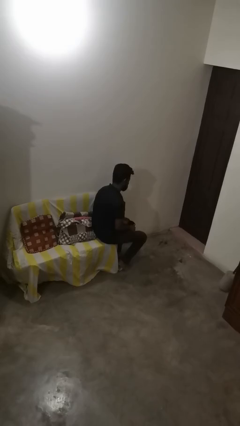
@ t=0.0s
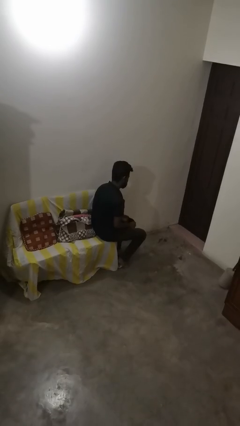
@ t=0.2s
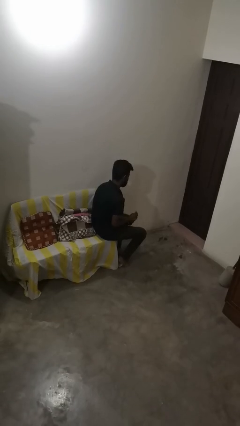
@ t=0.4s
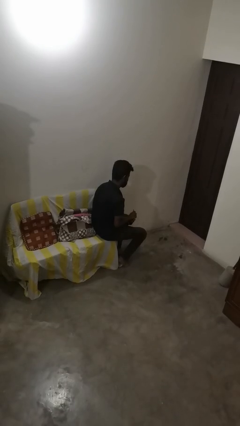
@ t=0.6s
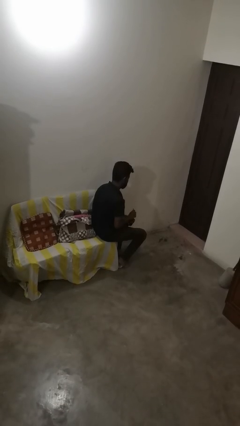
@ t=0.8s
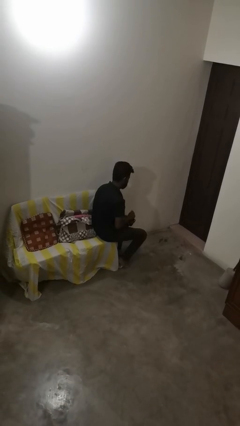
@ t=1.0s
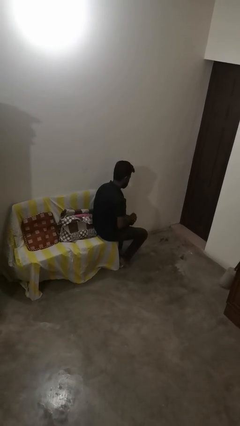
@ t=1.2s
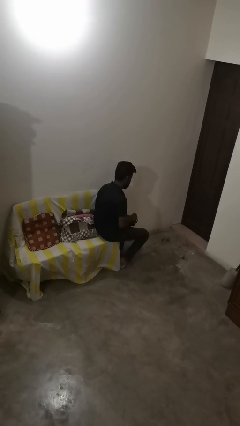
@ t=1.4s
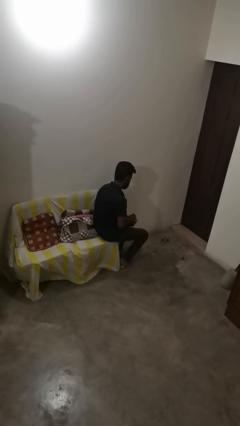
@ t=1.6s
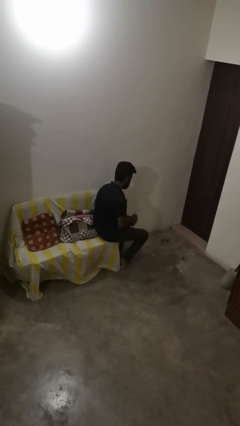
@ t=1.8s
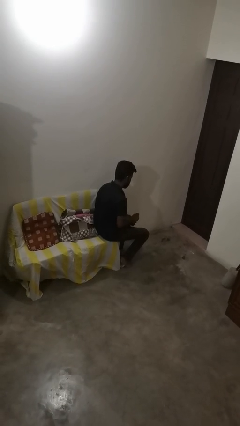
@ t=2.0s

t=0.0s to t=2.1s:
person stirs mug

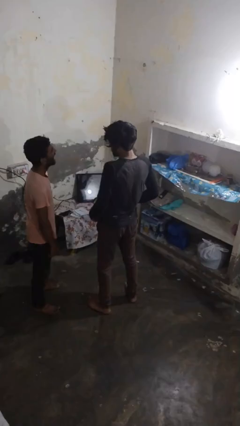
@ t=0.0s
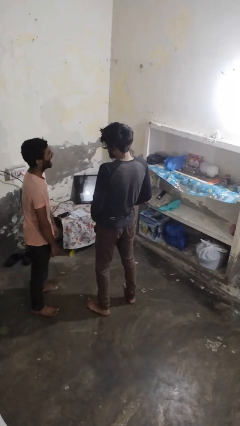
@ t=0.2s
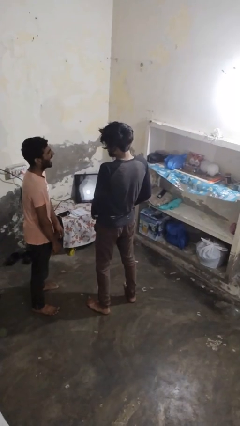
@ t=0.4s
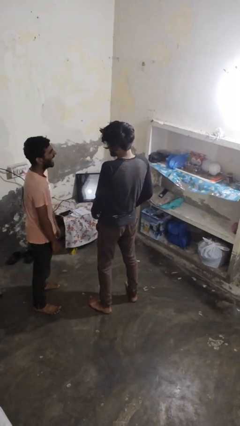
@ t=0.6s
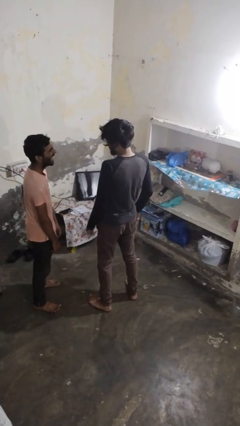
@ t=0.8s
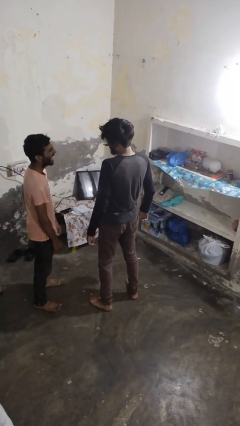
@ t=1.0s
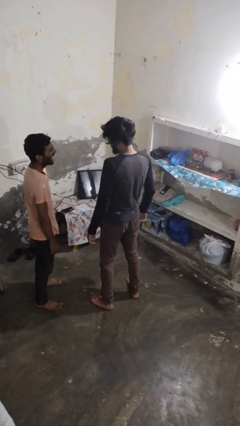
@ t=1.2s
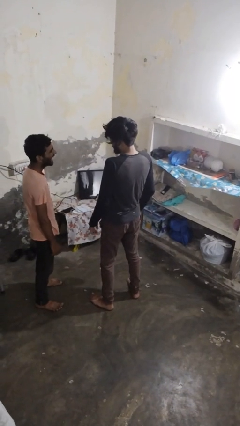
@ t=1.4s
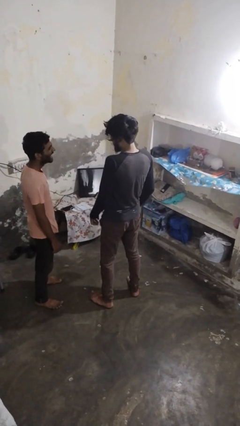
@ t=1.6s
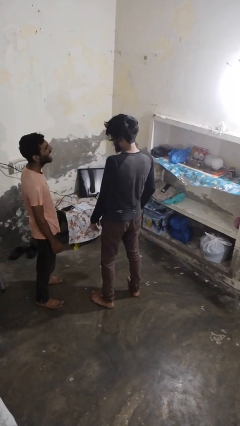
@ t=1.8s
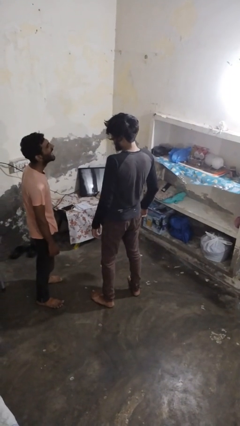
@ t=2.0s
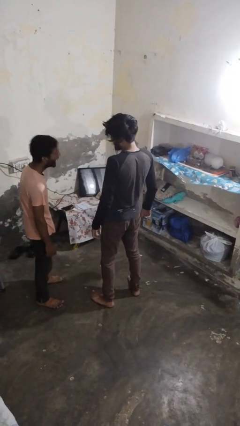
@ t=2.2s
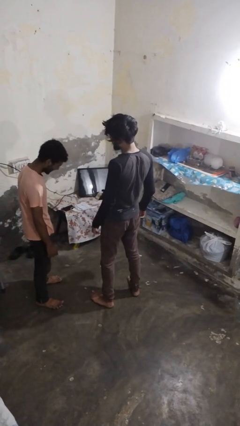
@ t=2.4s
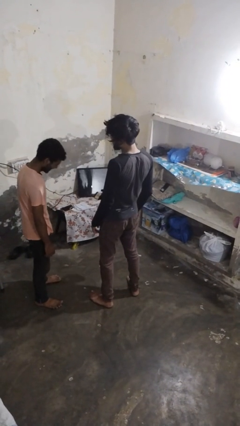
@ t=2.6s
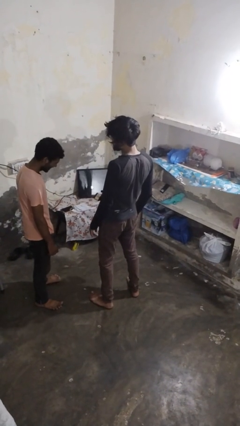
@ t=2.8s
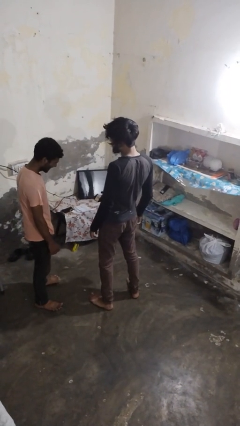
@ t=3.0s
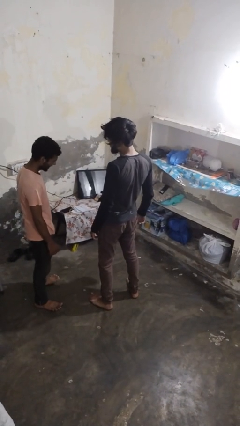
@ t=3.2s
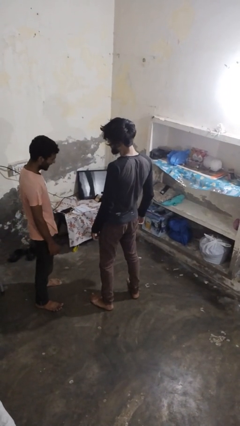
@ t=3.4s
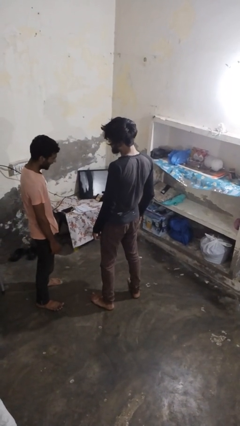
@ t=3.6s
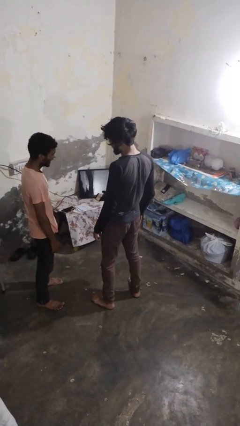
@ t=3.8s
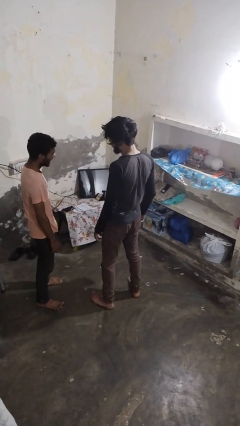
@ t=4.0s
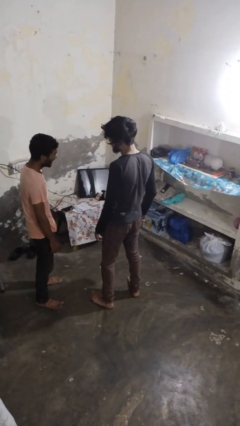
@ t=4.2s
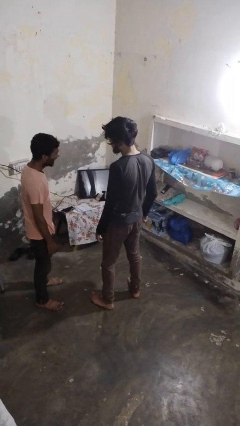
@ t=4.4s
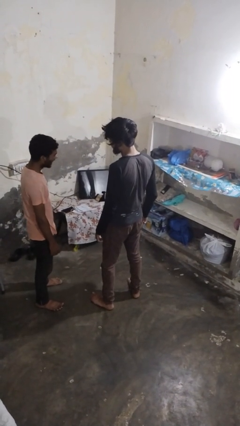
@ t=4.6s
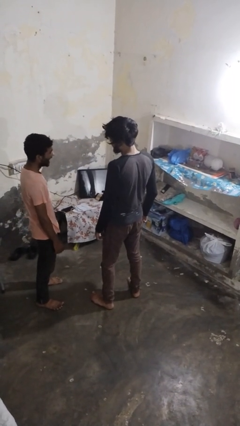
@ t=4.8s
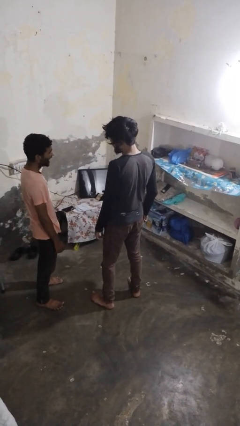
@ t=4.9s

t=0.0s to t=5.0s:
person laughs with person

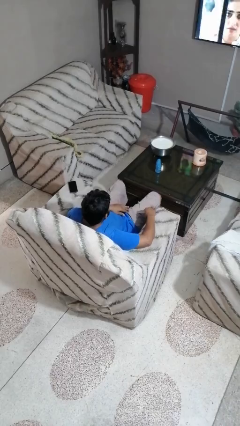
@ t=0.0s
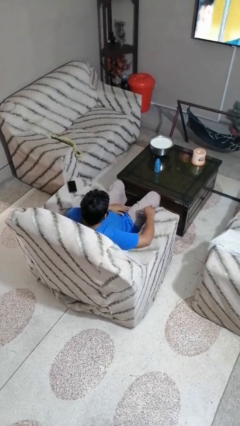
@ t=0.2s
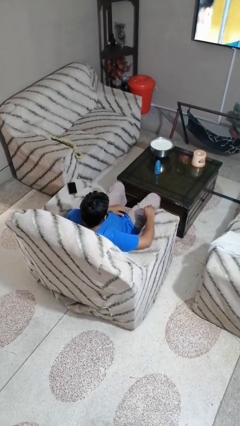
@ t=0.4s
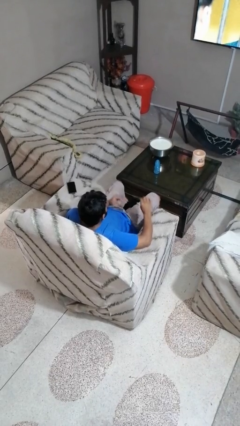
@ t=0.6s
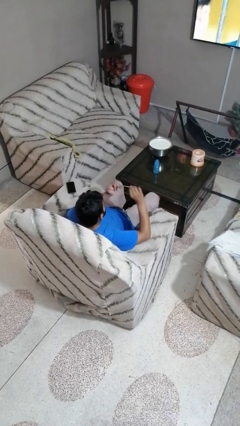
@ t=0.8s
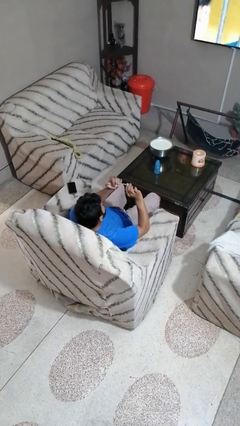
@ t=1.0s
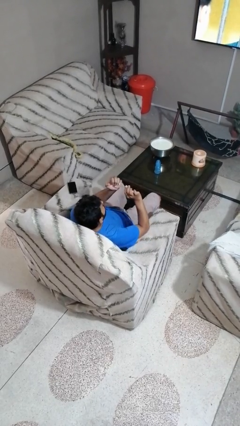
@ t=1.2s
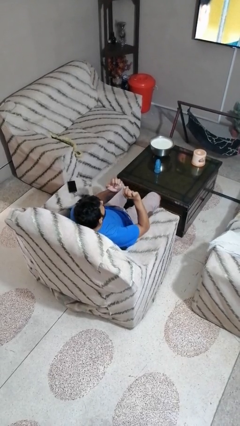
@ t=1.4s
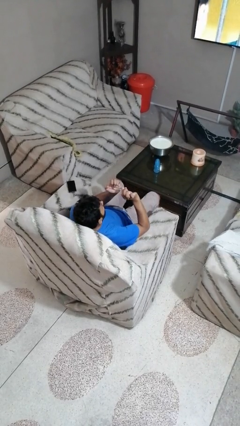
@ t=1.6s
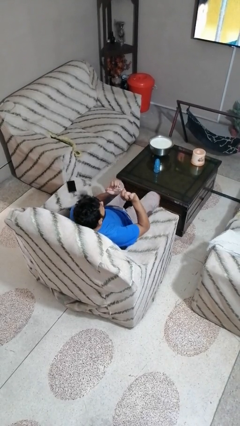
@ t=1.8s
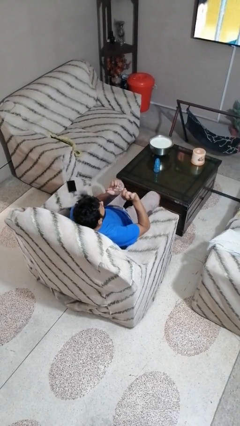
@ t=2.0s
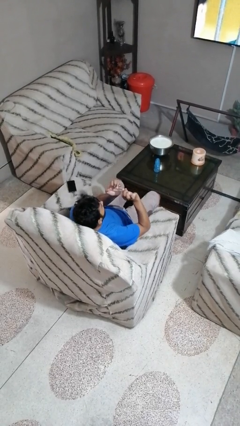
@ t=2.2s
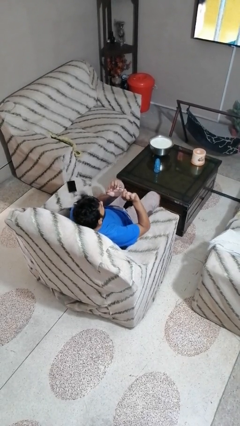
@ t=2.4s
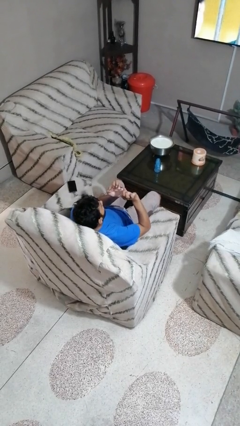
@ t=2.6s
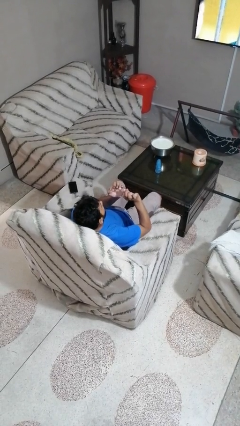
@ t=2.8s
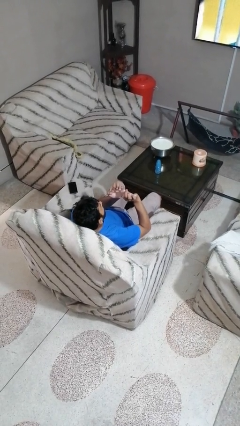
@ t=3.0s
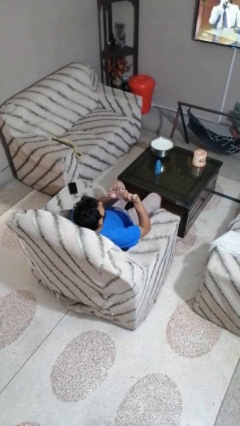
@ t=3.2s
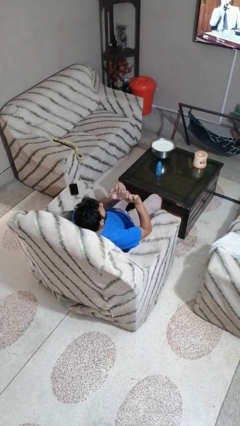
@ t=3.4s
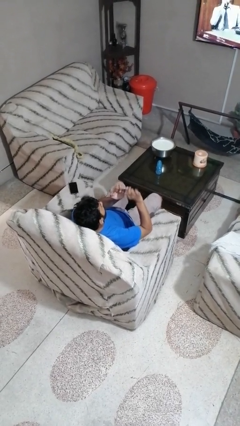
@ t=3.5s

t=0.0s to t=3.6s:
person files fingernails

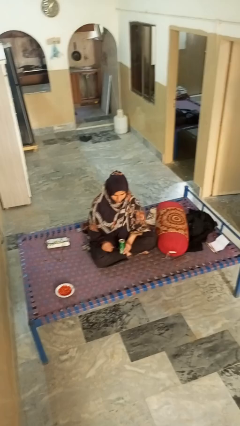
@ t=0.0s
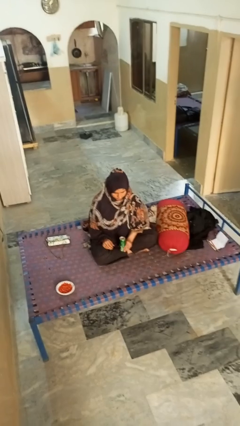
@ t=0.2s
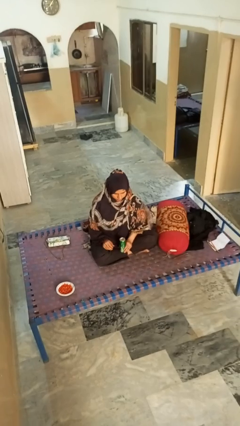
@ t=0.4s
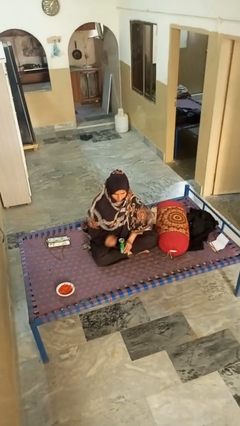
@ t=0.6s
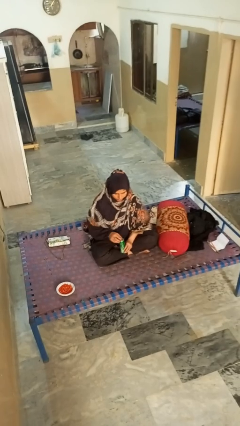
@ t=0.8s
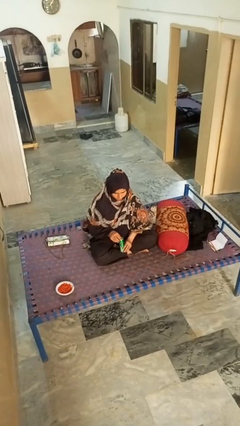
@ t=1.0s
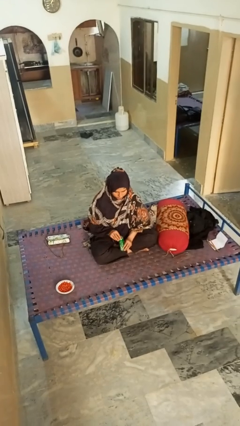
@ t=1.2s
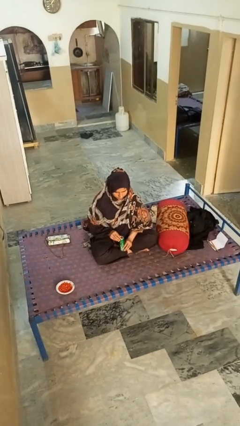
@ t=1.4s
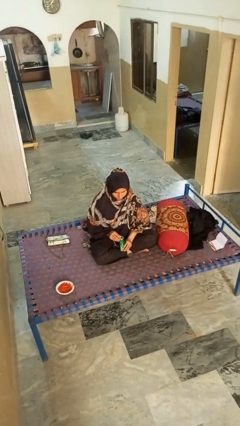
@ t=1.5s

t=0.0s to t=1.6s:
person opens can with can opener

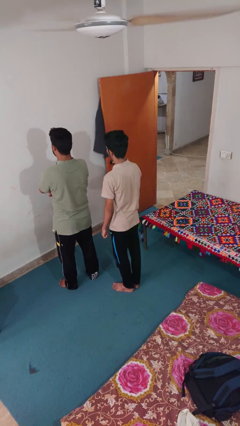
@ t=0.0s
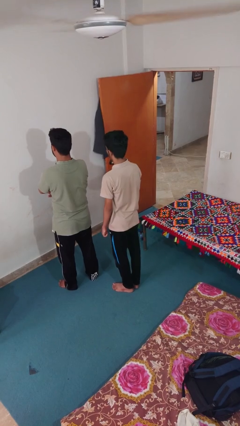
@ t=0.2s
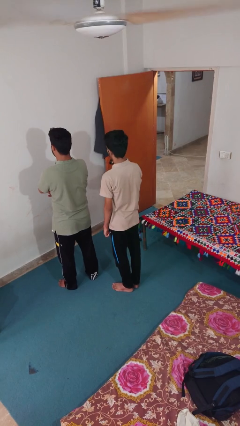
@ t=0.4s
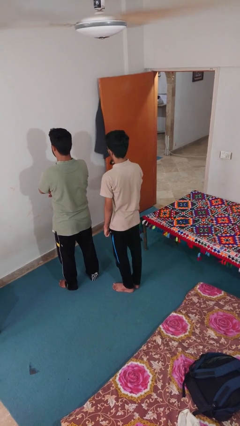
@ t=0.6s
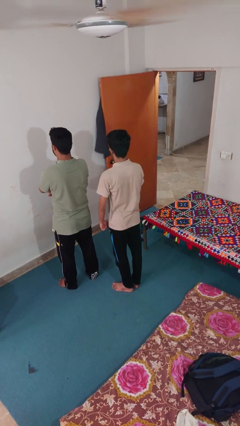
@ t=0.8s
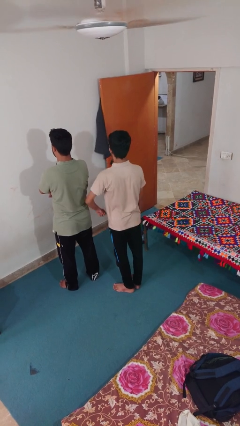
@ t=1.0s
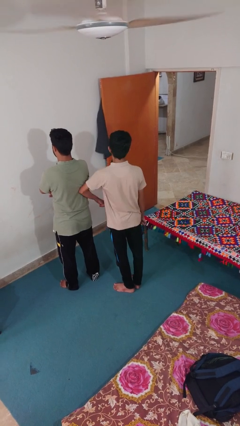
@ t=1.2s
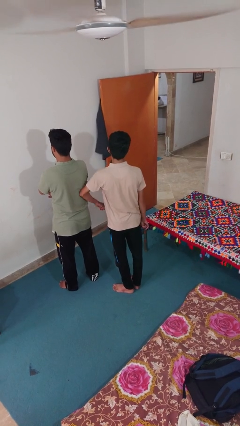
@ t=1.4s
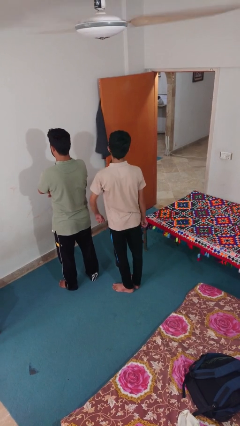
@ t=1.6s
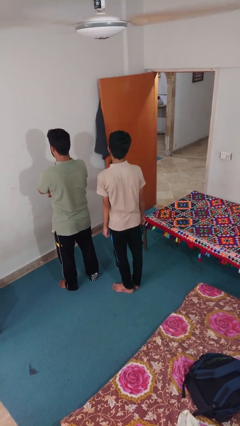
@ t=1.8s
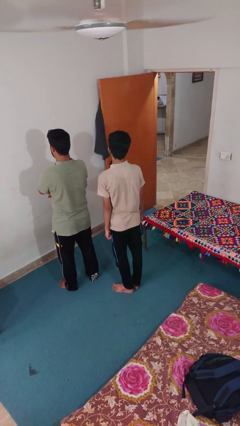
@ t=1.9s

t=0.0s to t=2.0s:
person nudges person with elbow

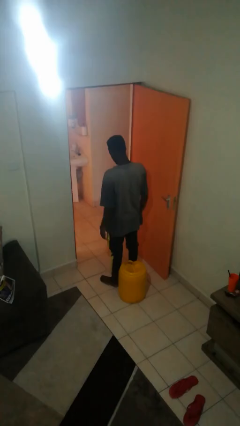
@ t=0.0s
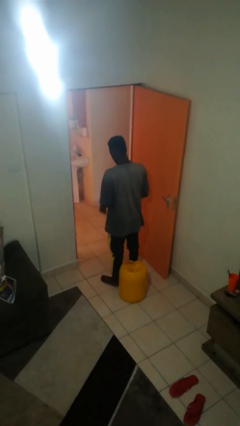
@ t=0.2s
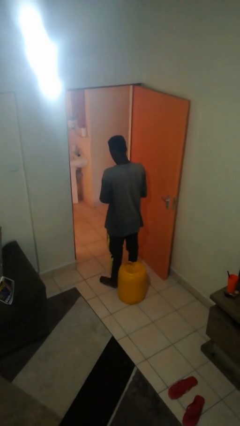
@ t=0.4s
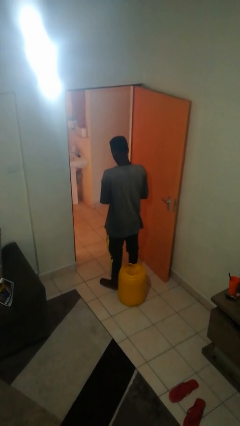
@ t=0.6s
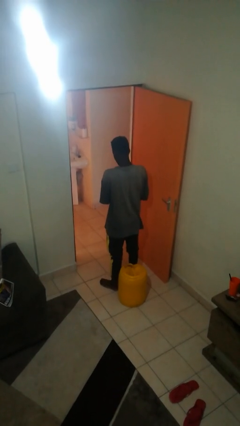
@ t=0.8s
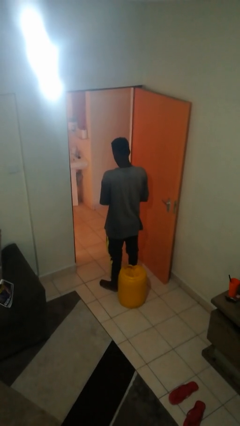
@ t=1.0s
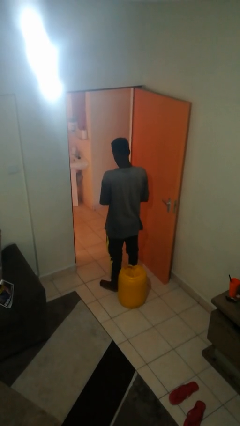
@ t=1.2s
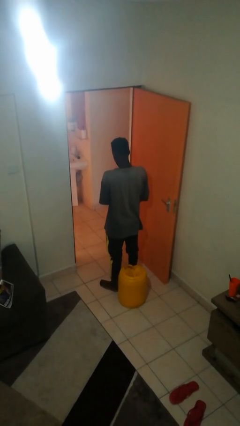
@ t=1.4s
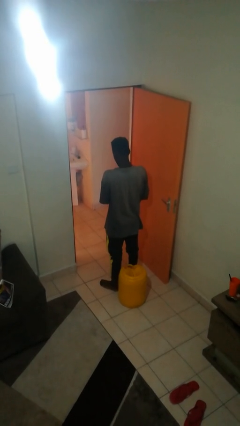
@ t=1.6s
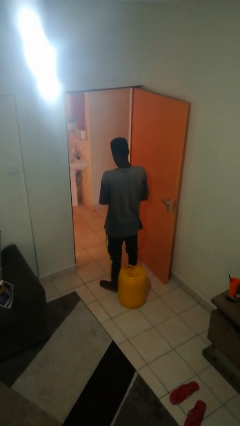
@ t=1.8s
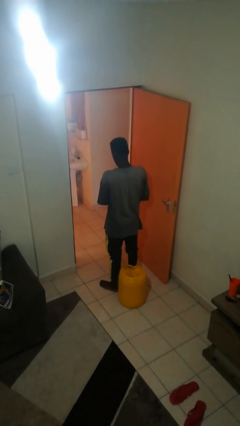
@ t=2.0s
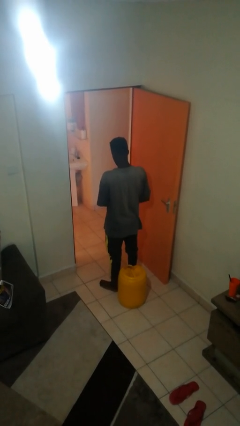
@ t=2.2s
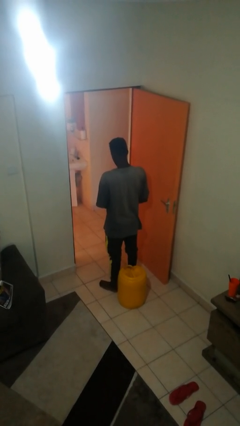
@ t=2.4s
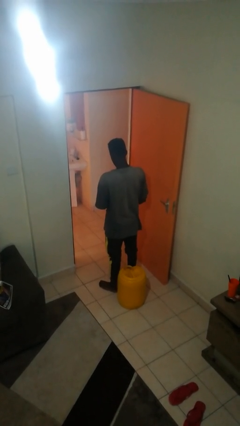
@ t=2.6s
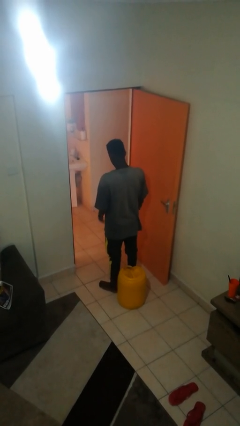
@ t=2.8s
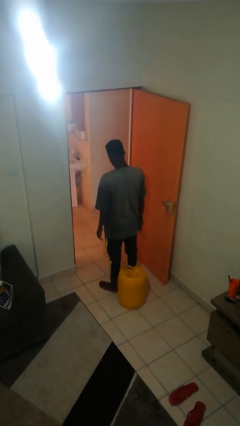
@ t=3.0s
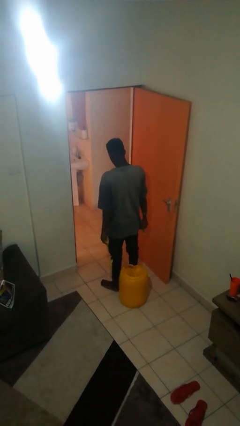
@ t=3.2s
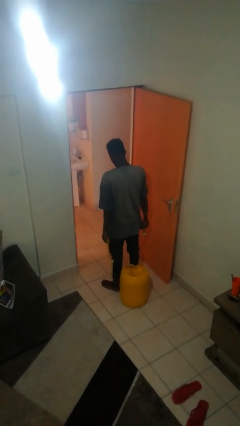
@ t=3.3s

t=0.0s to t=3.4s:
person takes off wristwatch
